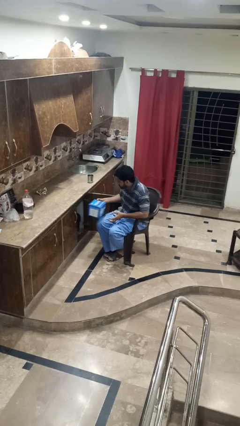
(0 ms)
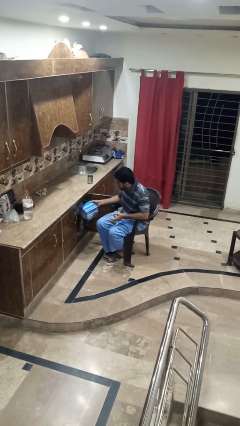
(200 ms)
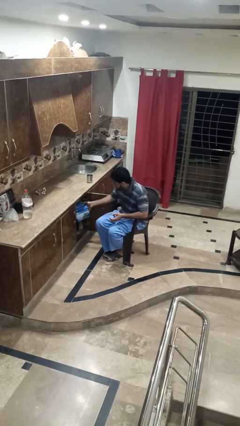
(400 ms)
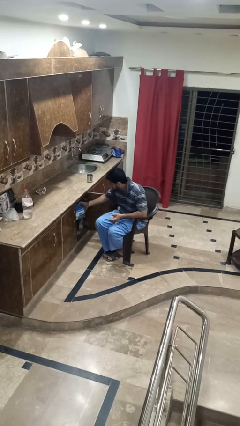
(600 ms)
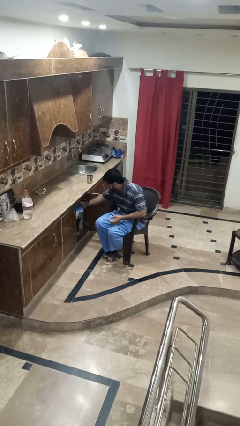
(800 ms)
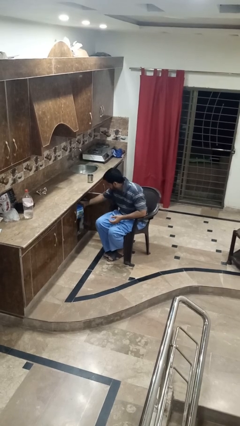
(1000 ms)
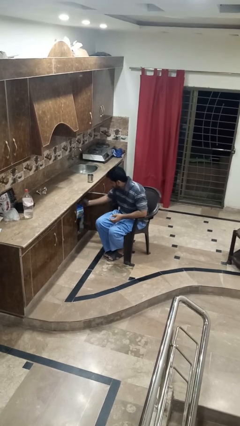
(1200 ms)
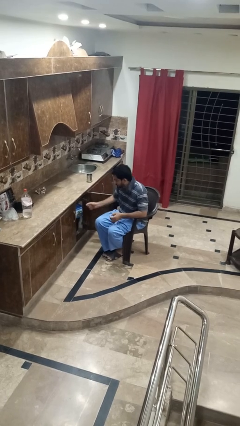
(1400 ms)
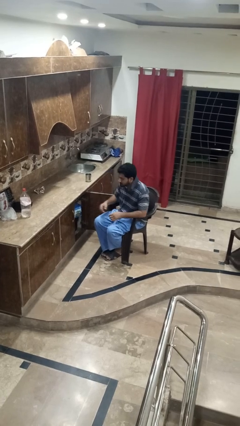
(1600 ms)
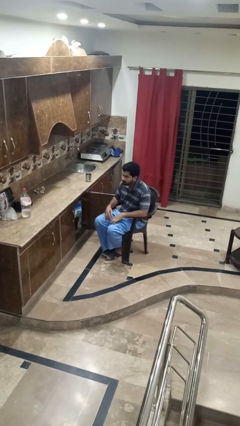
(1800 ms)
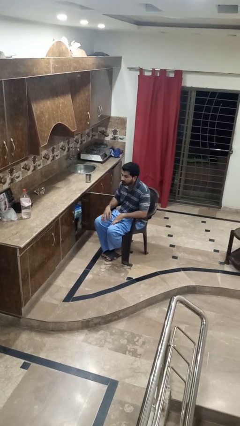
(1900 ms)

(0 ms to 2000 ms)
person puts down object into cabinet

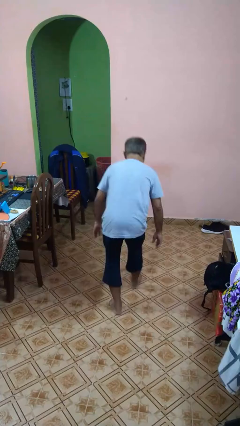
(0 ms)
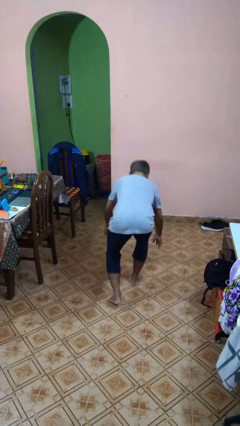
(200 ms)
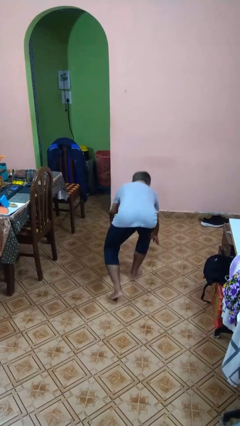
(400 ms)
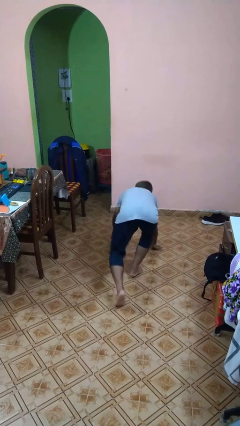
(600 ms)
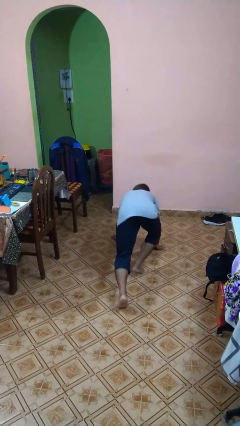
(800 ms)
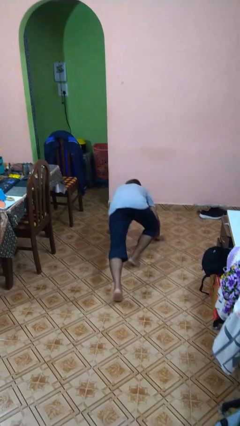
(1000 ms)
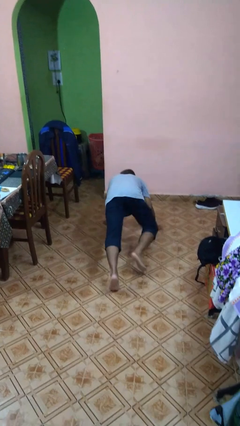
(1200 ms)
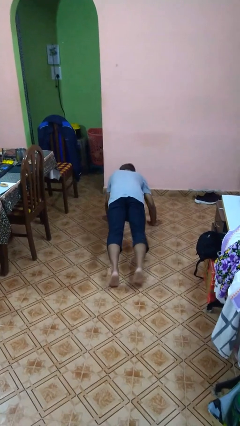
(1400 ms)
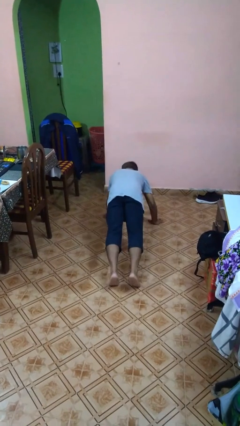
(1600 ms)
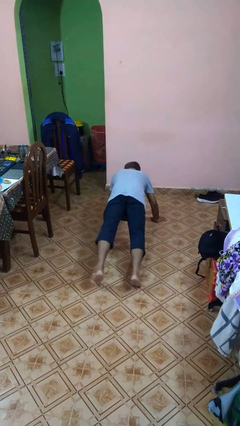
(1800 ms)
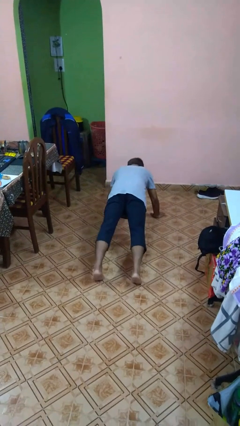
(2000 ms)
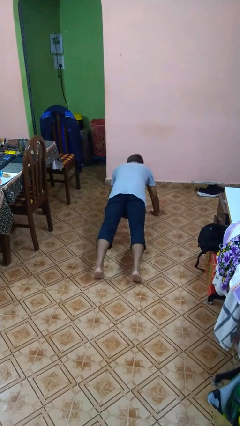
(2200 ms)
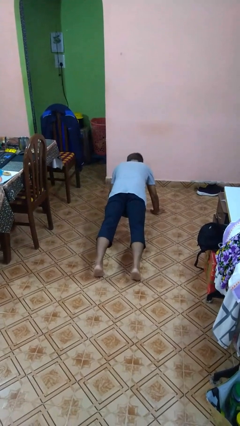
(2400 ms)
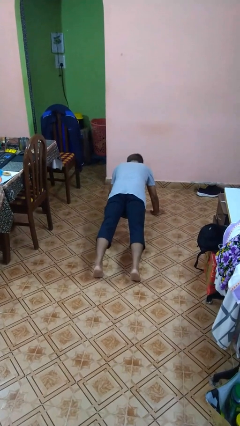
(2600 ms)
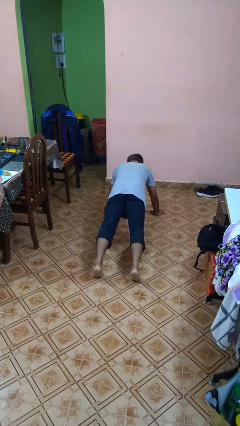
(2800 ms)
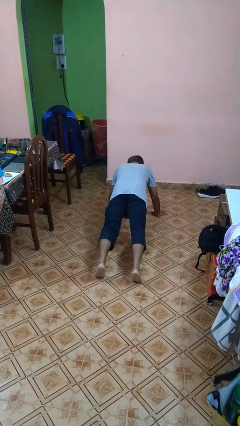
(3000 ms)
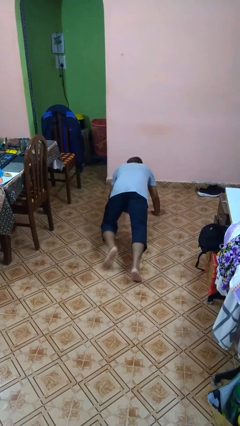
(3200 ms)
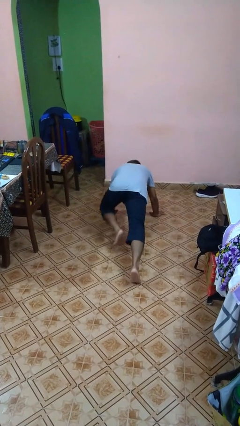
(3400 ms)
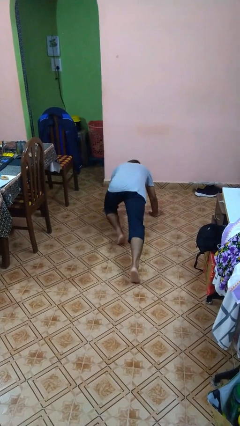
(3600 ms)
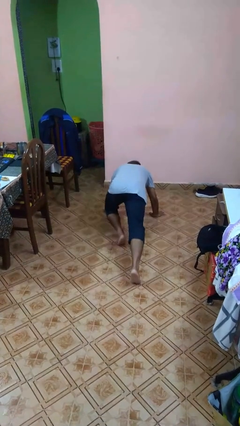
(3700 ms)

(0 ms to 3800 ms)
person exercises with plank

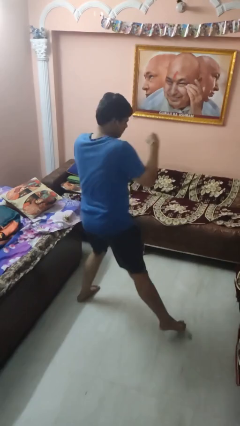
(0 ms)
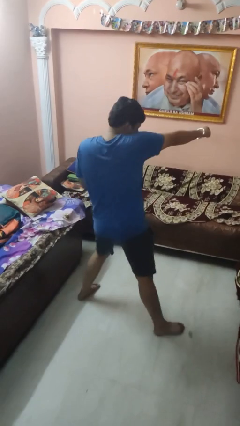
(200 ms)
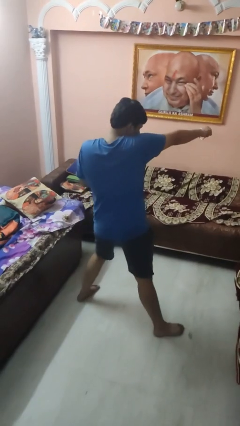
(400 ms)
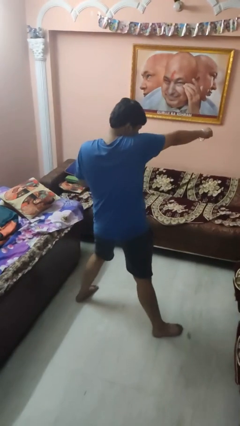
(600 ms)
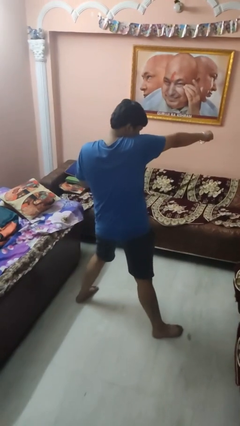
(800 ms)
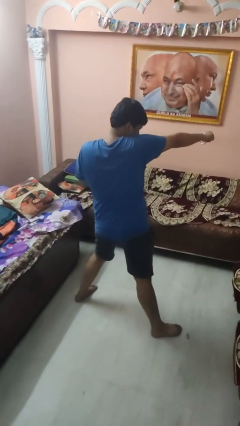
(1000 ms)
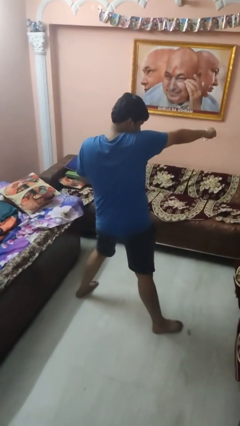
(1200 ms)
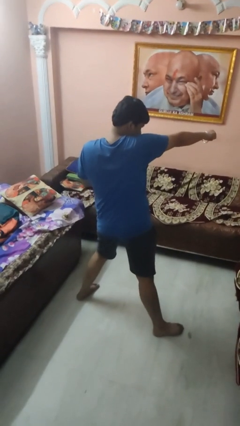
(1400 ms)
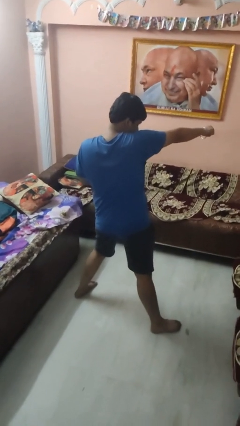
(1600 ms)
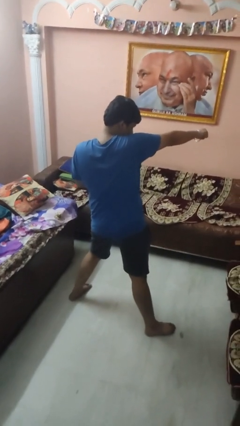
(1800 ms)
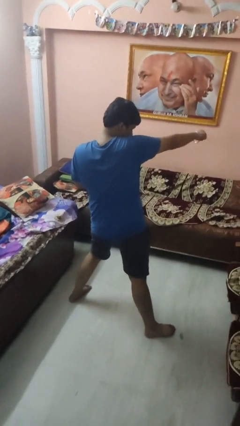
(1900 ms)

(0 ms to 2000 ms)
person punches

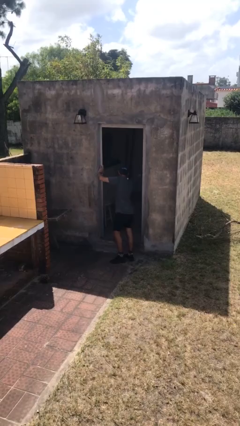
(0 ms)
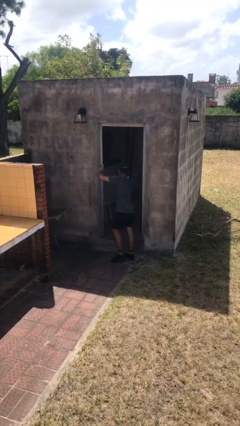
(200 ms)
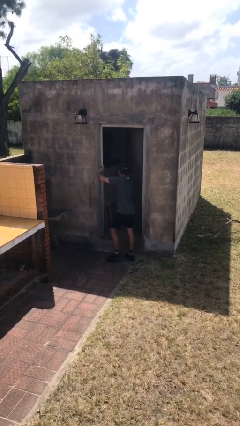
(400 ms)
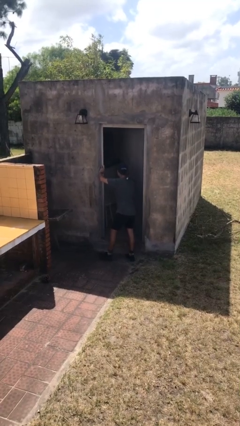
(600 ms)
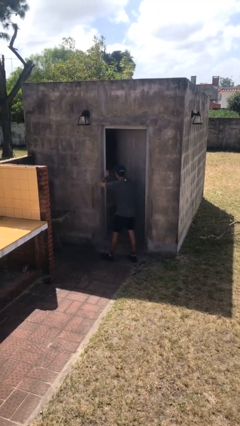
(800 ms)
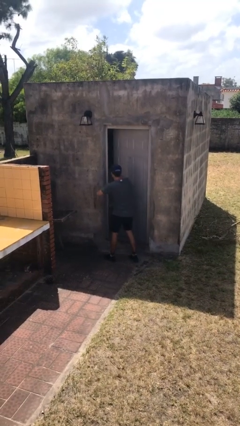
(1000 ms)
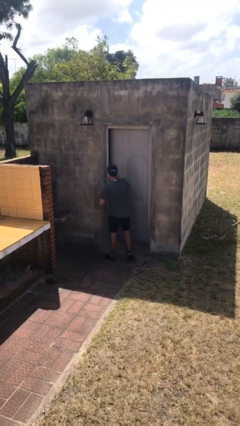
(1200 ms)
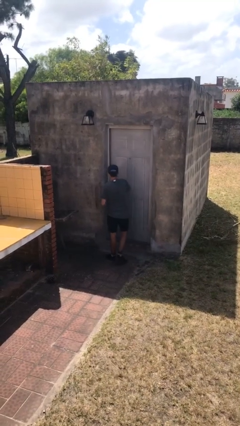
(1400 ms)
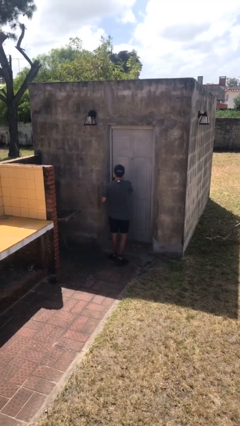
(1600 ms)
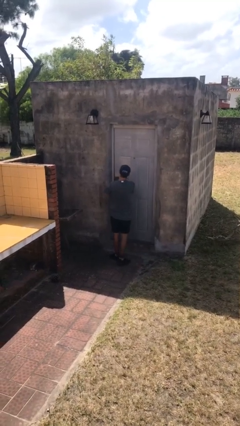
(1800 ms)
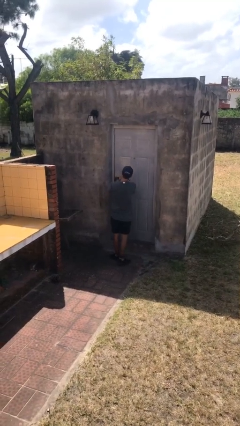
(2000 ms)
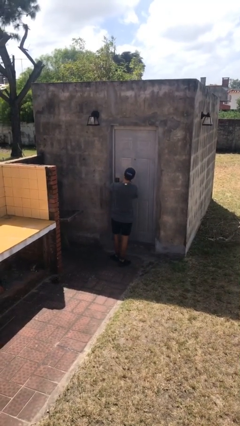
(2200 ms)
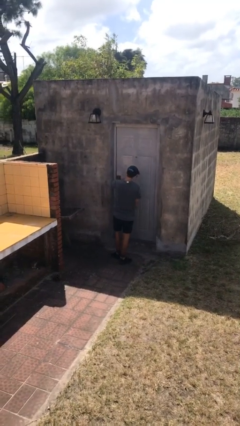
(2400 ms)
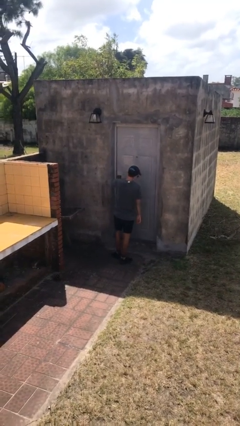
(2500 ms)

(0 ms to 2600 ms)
person closes facility door

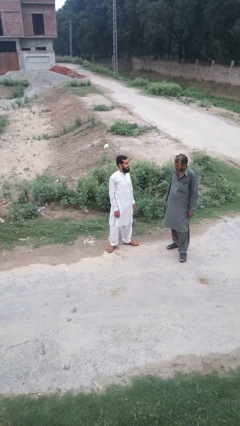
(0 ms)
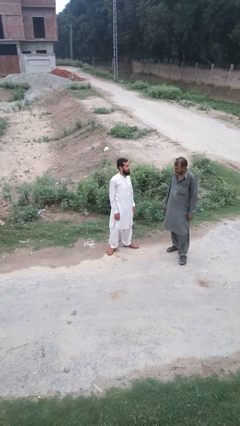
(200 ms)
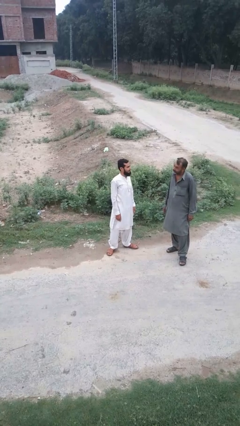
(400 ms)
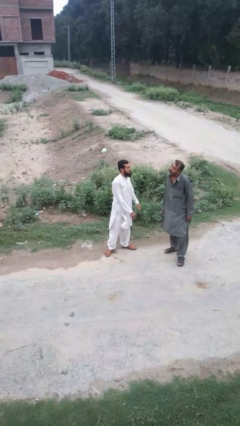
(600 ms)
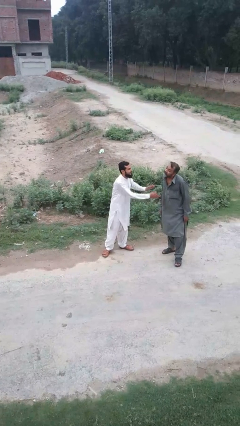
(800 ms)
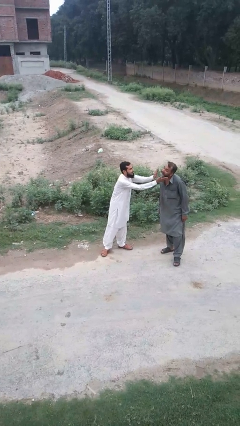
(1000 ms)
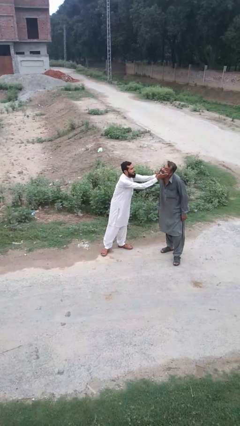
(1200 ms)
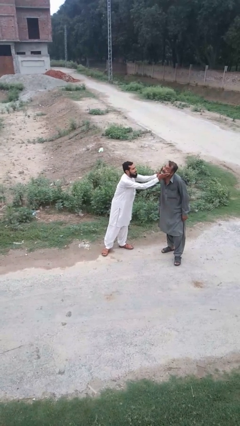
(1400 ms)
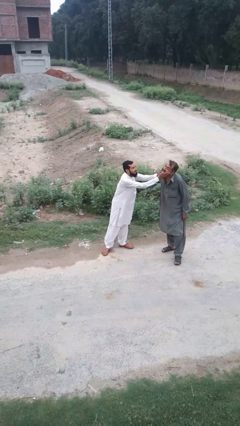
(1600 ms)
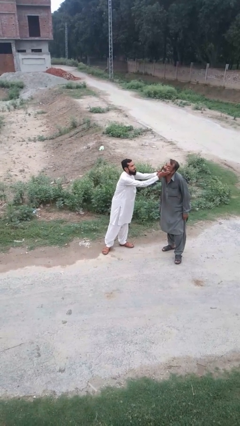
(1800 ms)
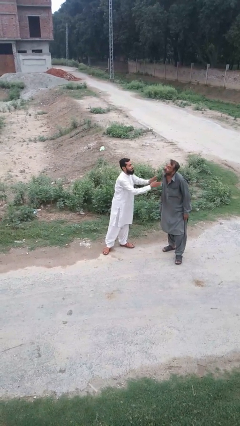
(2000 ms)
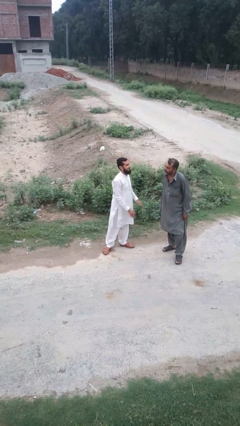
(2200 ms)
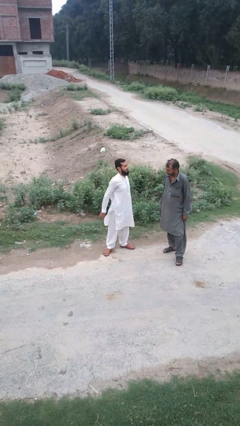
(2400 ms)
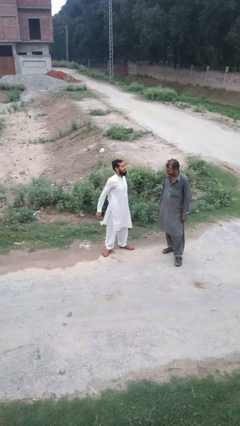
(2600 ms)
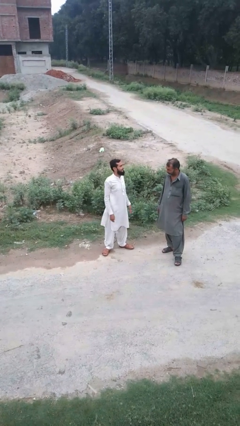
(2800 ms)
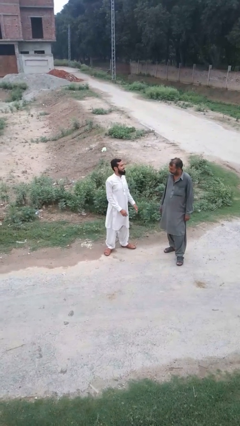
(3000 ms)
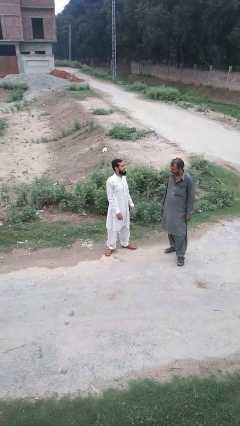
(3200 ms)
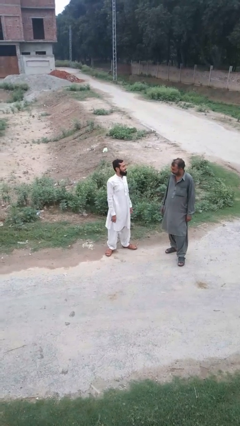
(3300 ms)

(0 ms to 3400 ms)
person touches face of person

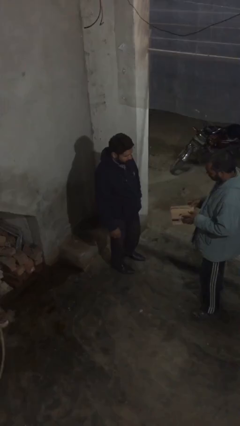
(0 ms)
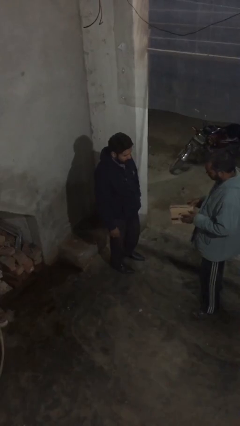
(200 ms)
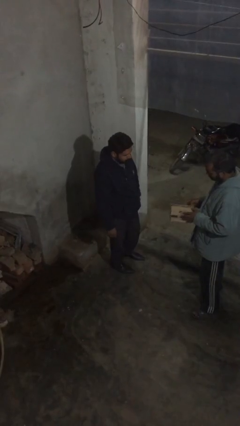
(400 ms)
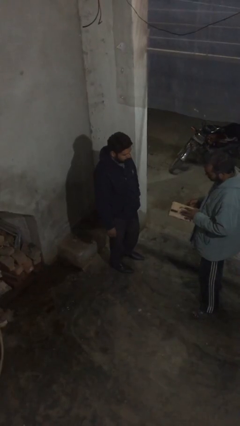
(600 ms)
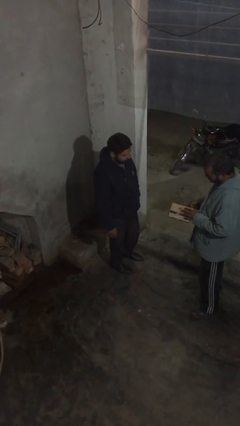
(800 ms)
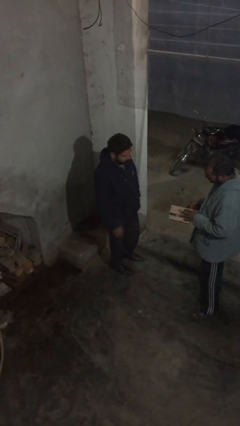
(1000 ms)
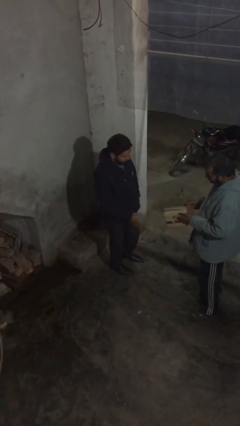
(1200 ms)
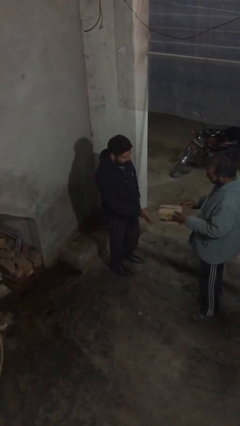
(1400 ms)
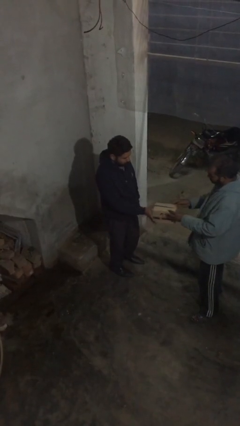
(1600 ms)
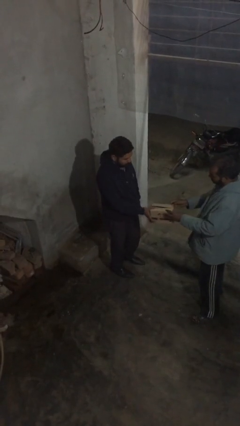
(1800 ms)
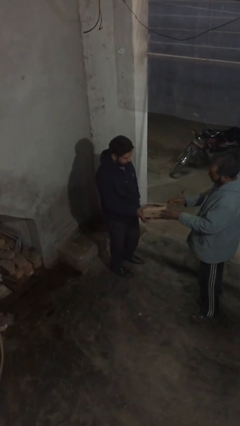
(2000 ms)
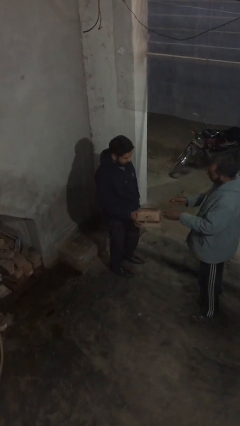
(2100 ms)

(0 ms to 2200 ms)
person transfers object to person

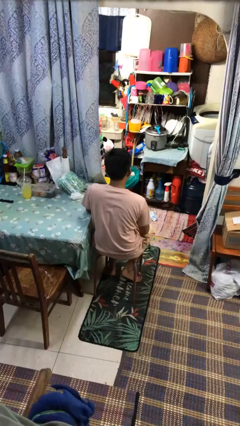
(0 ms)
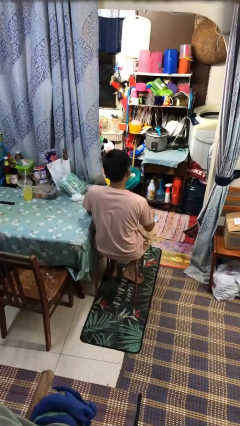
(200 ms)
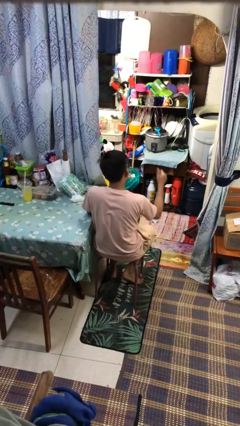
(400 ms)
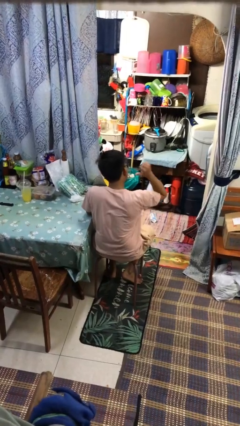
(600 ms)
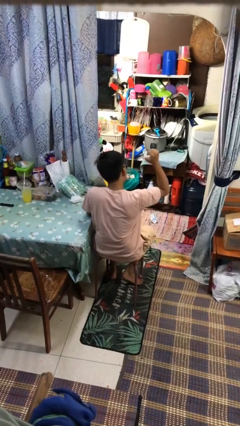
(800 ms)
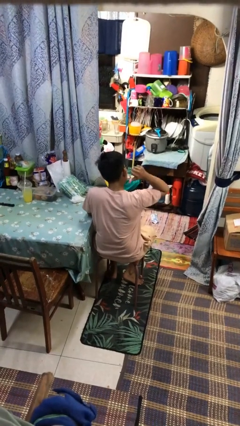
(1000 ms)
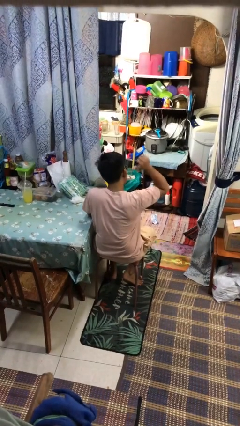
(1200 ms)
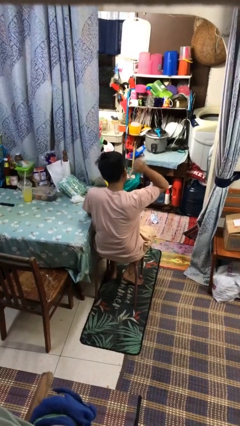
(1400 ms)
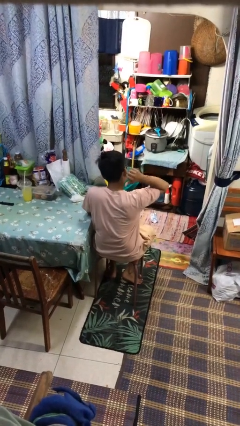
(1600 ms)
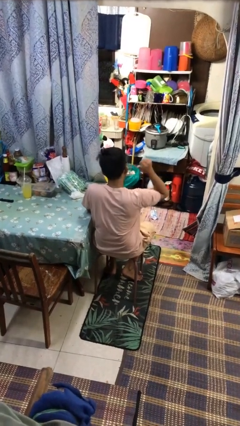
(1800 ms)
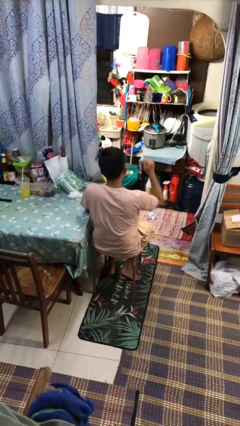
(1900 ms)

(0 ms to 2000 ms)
person gestures behind me
